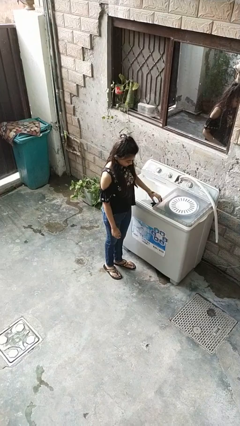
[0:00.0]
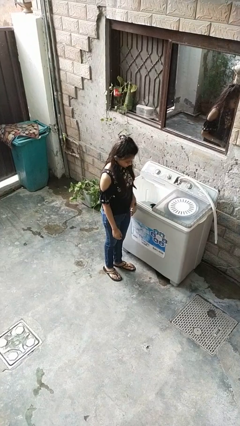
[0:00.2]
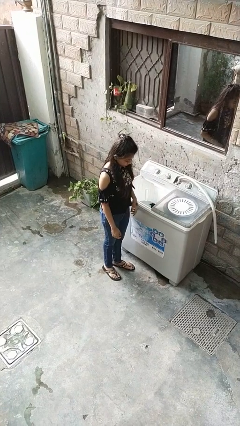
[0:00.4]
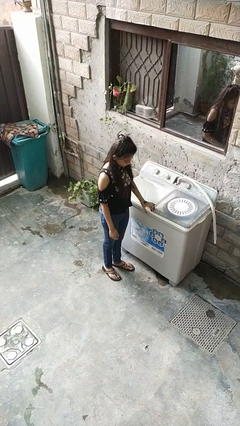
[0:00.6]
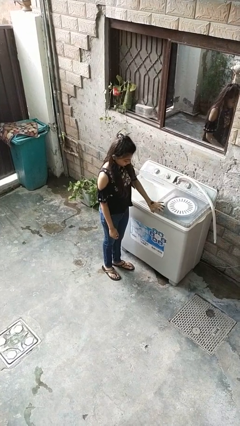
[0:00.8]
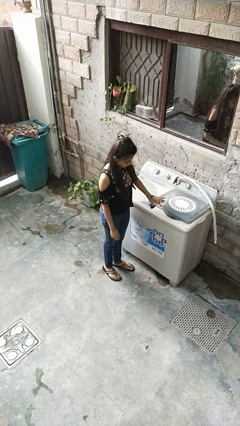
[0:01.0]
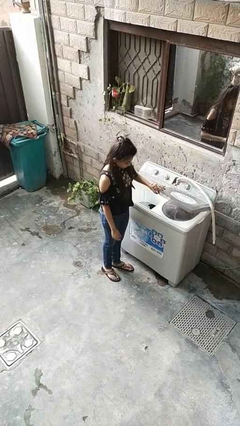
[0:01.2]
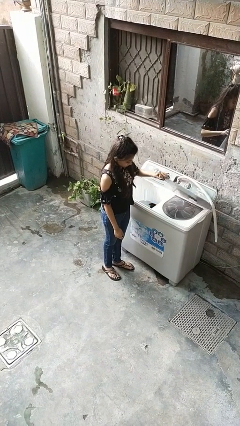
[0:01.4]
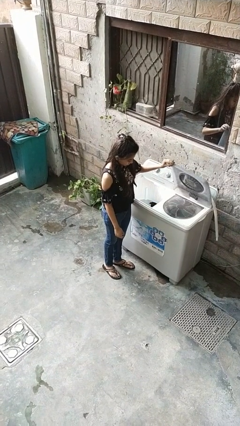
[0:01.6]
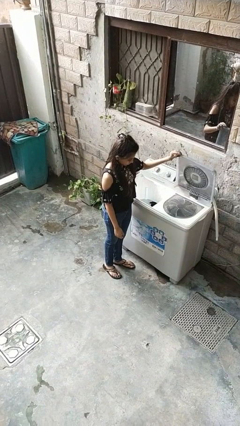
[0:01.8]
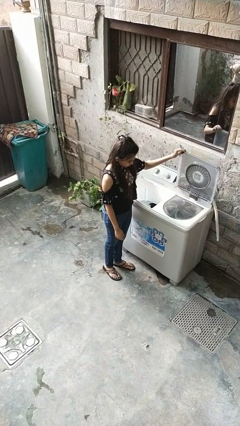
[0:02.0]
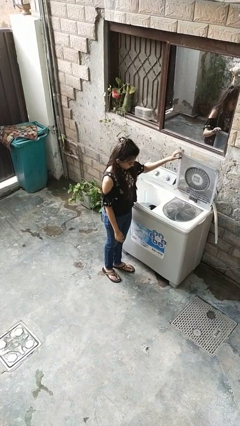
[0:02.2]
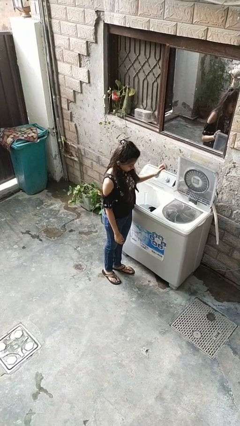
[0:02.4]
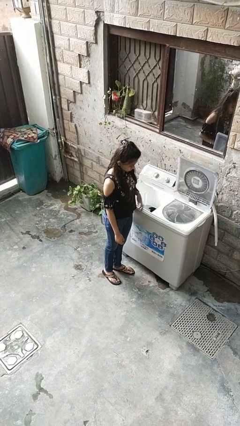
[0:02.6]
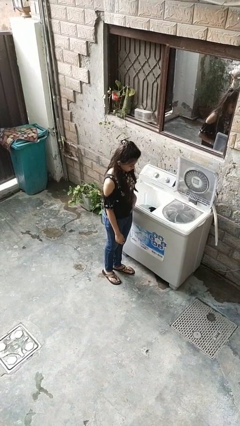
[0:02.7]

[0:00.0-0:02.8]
person opens clothes washer

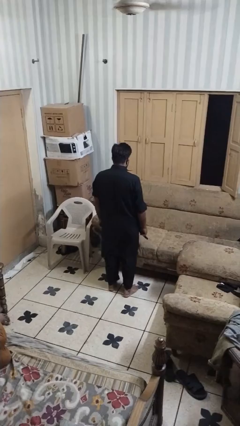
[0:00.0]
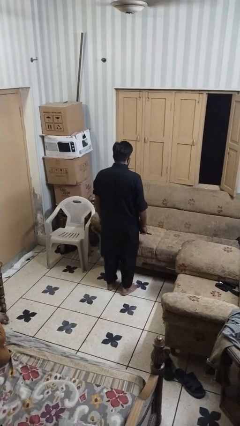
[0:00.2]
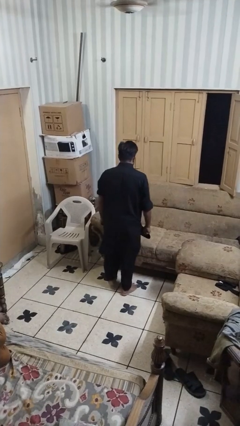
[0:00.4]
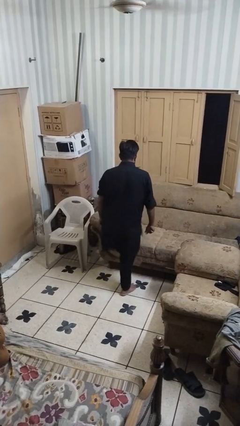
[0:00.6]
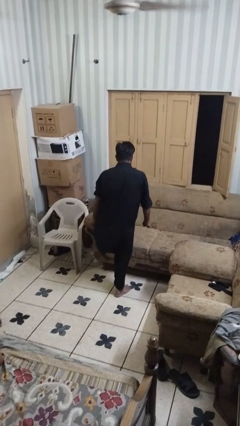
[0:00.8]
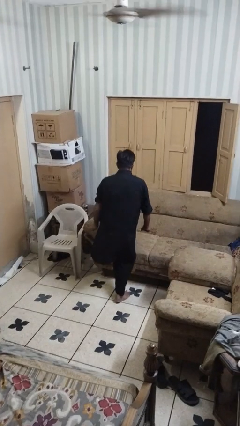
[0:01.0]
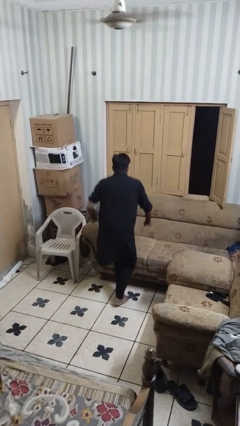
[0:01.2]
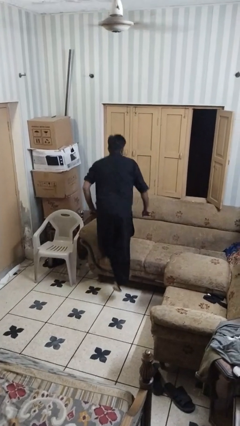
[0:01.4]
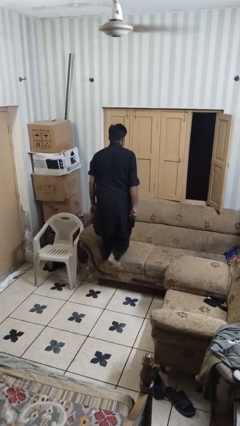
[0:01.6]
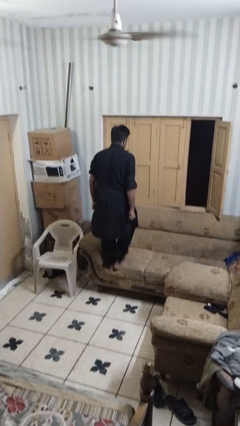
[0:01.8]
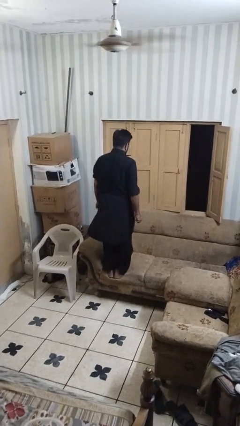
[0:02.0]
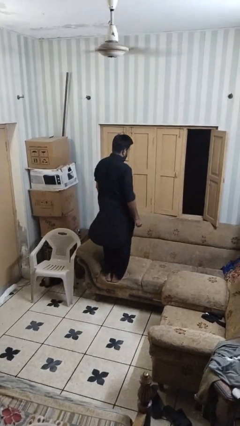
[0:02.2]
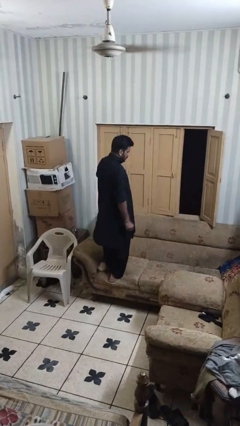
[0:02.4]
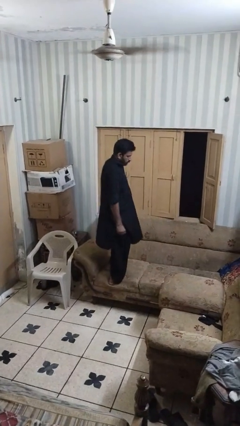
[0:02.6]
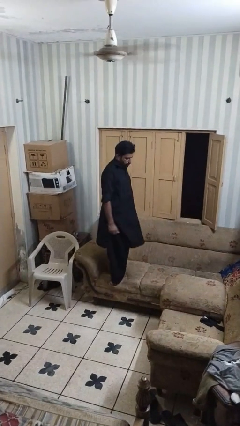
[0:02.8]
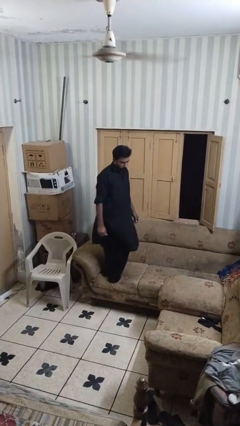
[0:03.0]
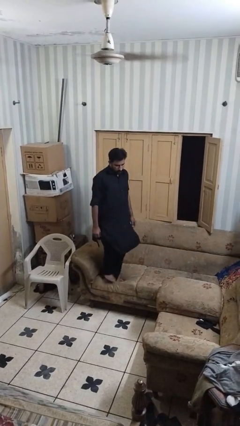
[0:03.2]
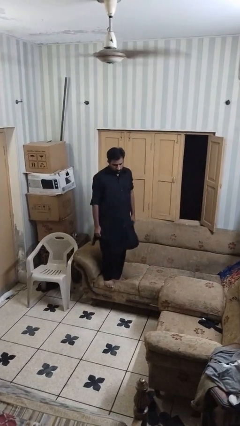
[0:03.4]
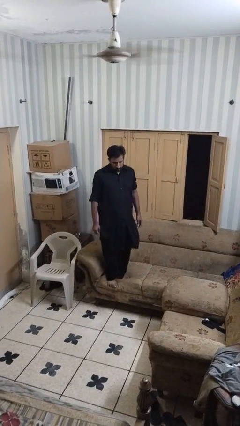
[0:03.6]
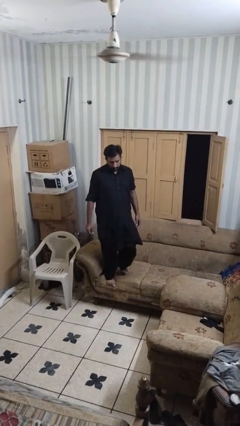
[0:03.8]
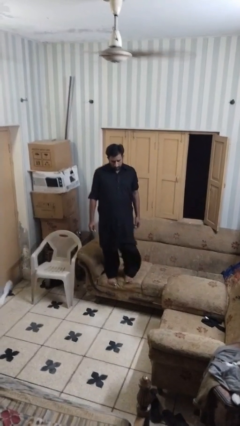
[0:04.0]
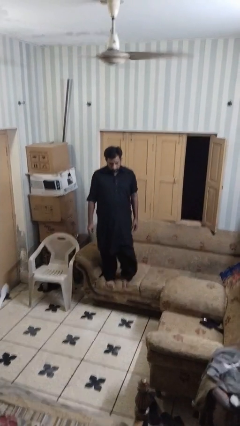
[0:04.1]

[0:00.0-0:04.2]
person climbs on couch

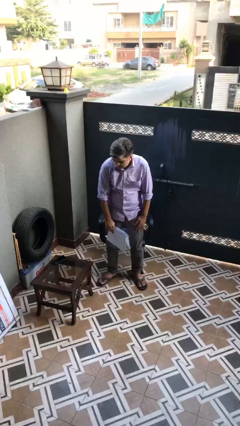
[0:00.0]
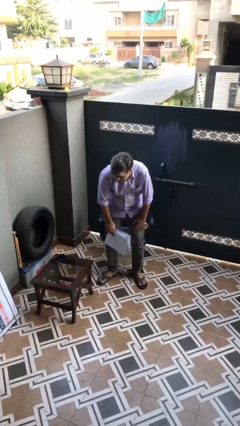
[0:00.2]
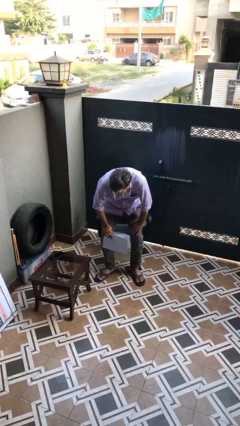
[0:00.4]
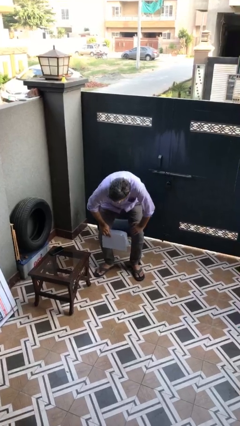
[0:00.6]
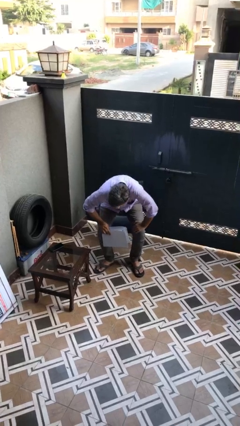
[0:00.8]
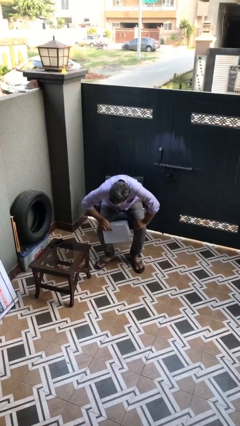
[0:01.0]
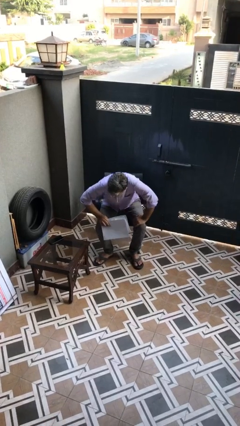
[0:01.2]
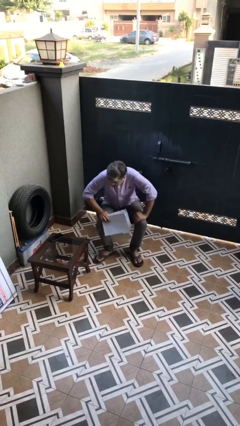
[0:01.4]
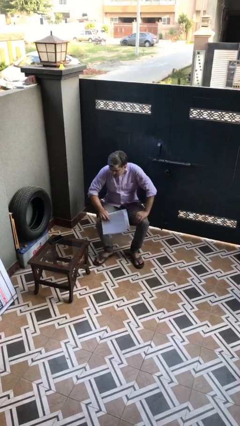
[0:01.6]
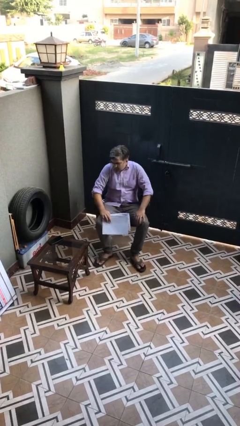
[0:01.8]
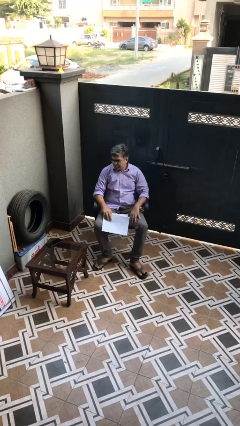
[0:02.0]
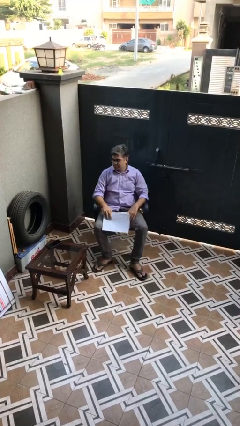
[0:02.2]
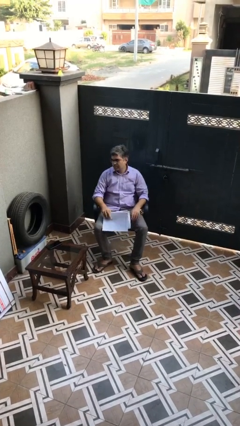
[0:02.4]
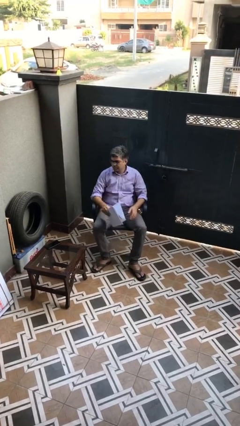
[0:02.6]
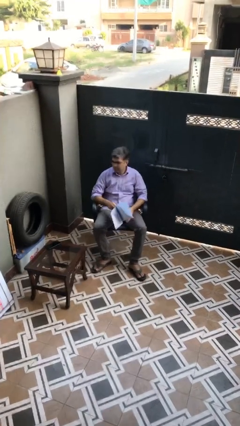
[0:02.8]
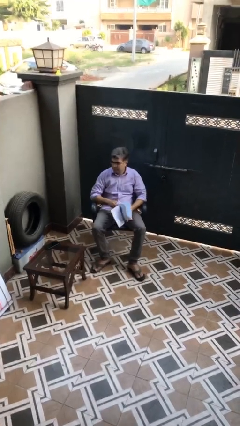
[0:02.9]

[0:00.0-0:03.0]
person sits down

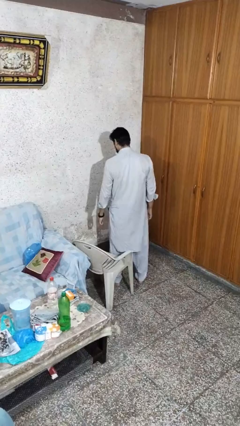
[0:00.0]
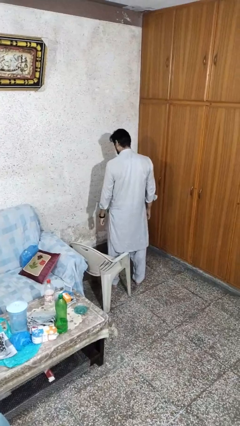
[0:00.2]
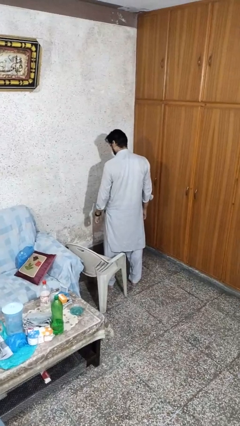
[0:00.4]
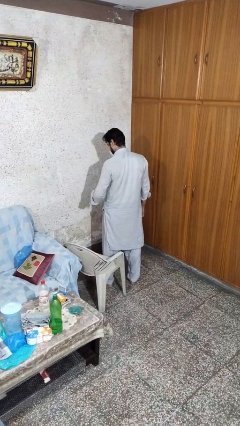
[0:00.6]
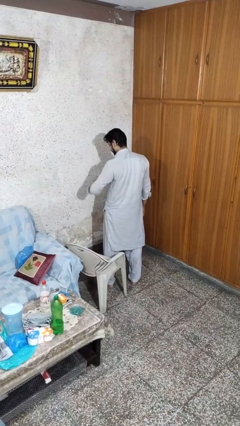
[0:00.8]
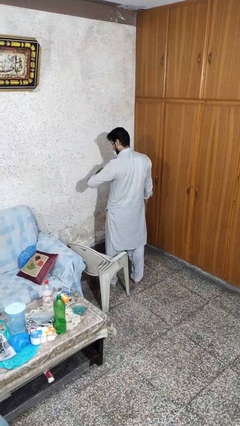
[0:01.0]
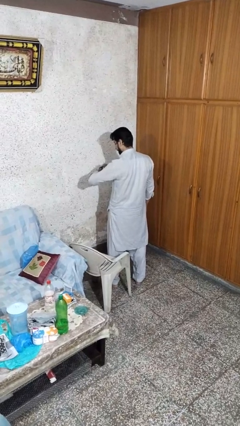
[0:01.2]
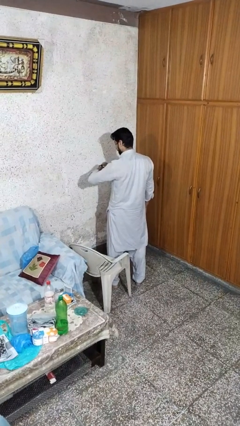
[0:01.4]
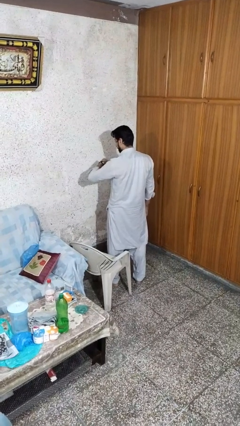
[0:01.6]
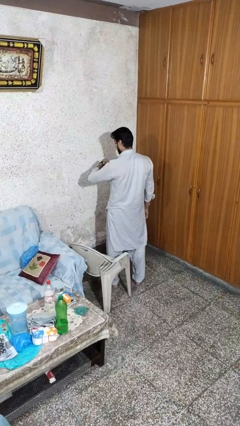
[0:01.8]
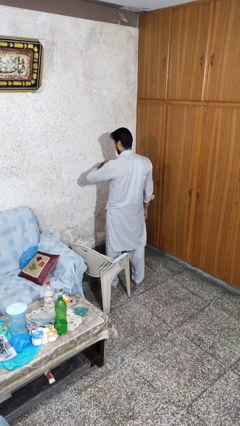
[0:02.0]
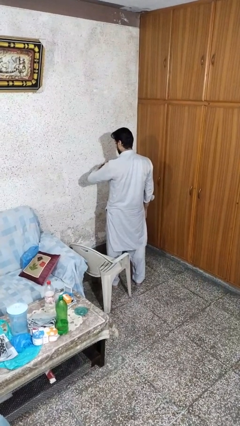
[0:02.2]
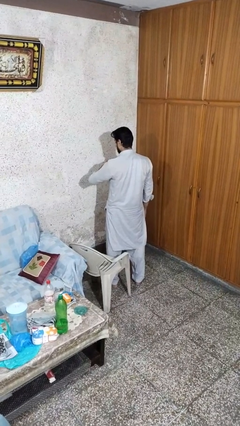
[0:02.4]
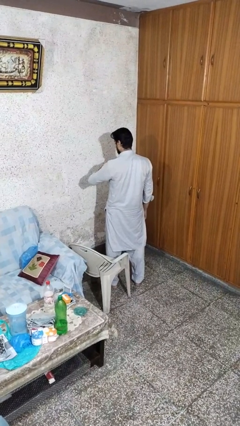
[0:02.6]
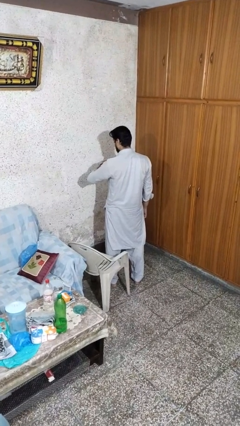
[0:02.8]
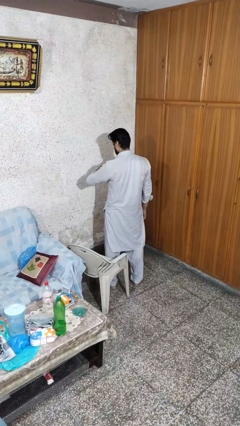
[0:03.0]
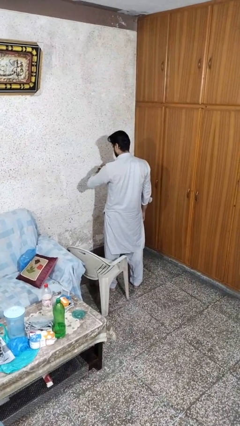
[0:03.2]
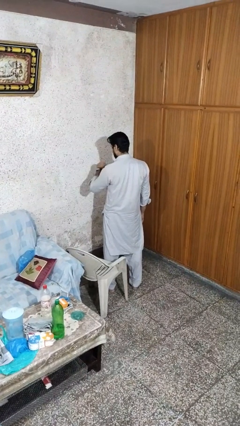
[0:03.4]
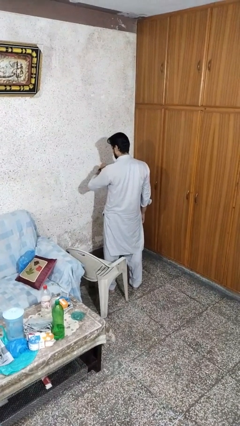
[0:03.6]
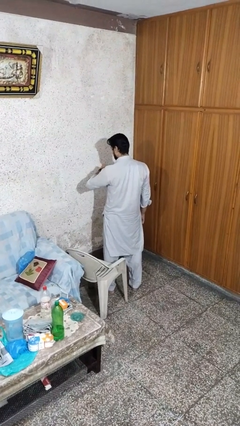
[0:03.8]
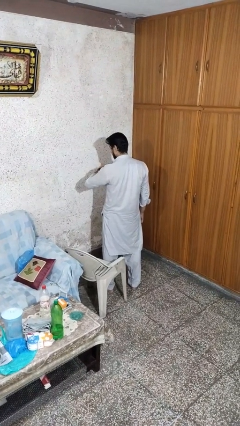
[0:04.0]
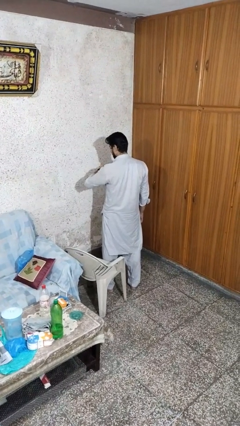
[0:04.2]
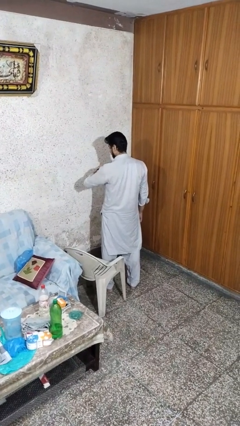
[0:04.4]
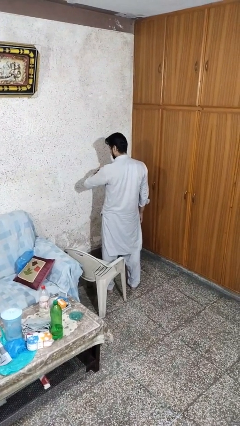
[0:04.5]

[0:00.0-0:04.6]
person looks at wristwatch

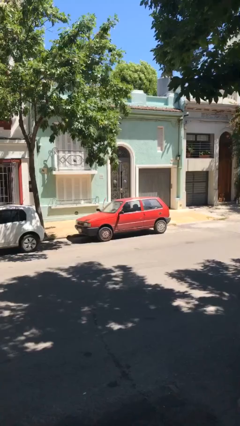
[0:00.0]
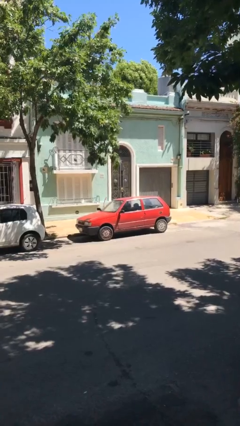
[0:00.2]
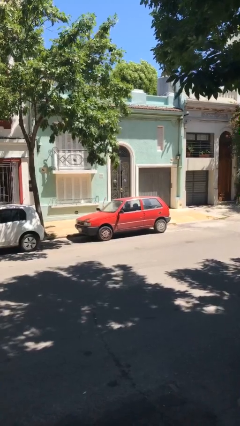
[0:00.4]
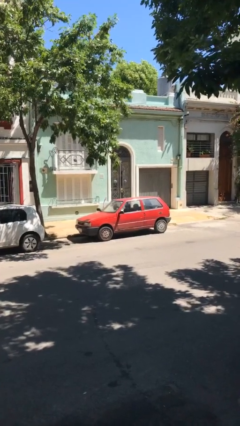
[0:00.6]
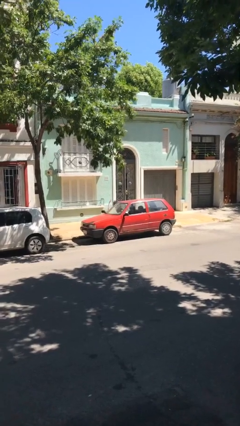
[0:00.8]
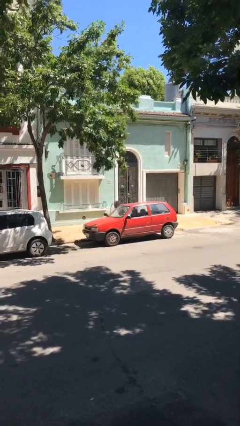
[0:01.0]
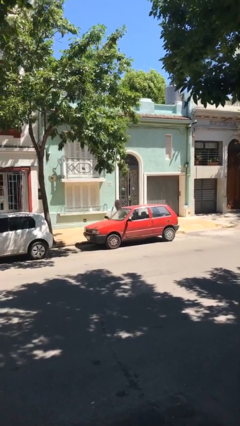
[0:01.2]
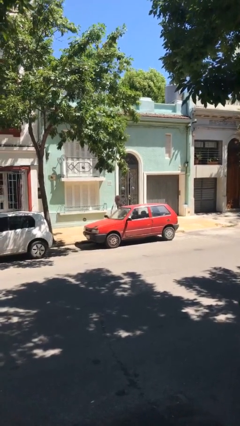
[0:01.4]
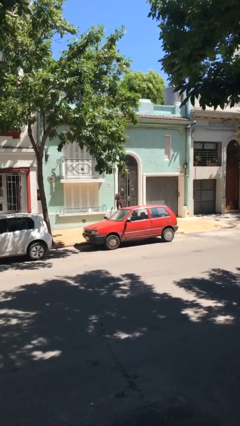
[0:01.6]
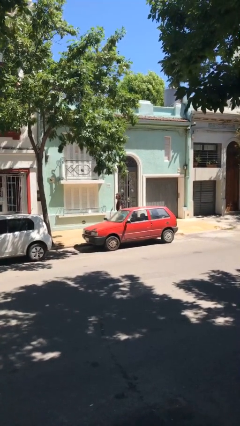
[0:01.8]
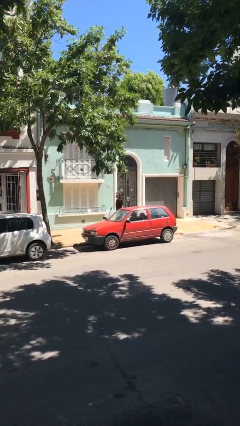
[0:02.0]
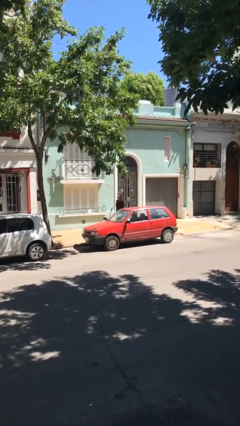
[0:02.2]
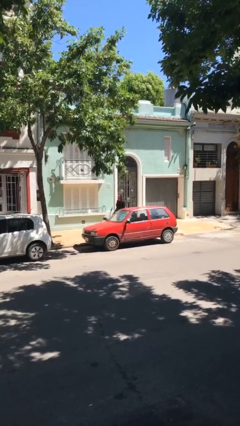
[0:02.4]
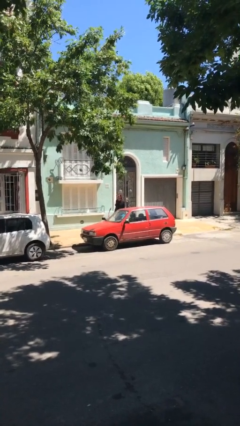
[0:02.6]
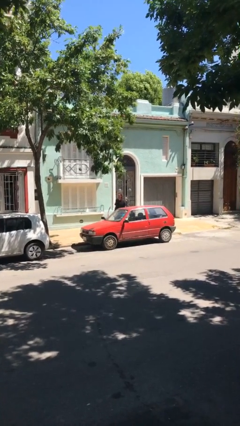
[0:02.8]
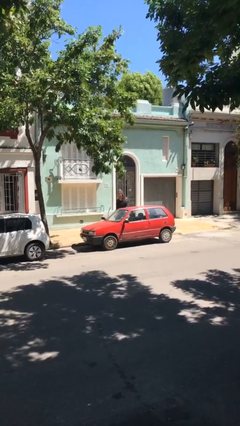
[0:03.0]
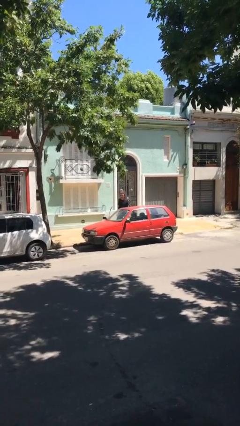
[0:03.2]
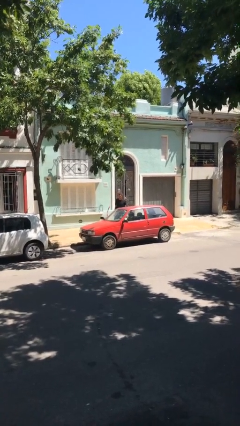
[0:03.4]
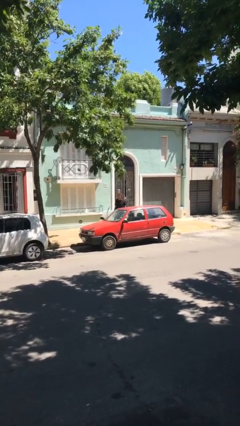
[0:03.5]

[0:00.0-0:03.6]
person exits car
